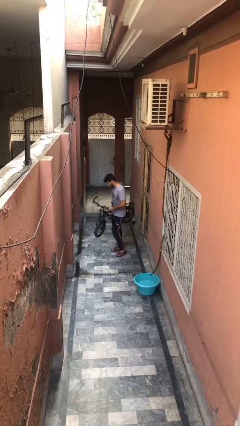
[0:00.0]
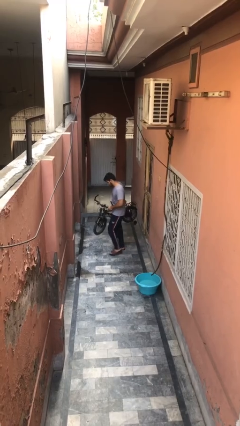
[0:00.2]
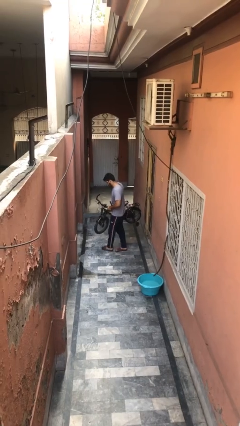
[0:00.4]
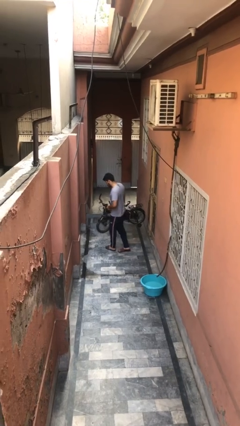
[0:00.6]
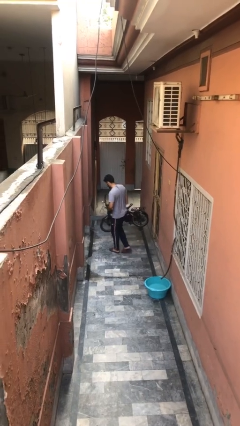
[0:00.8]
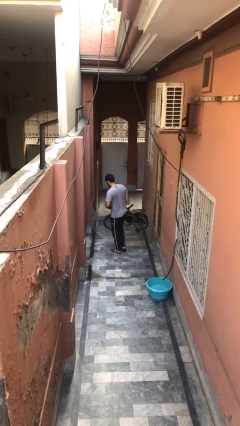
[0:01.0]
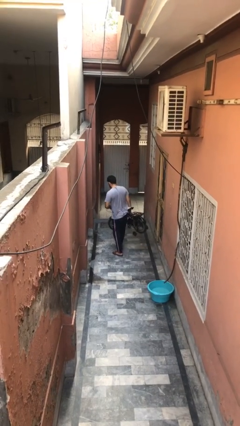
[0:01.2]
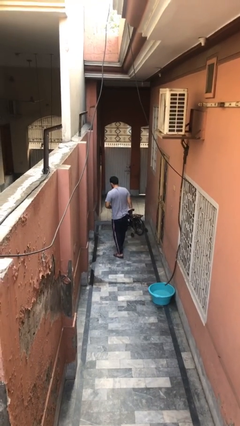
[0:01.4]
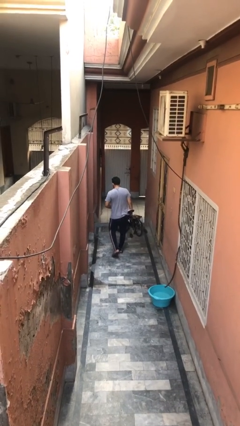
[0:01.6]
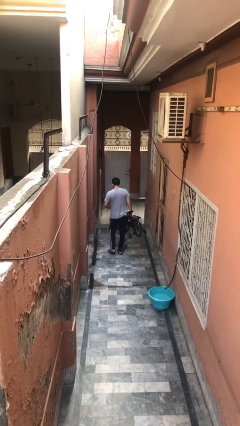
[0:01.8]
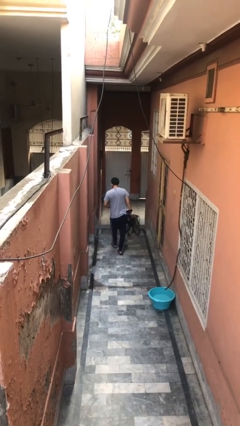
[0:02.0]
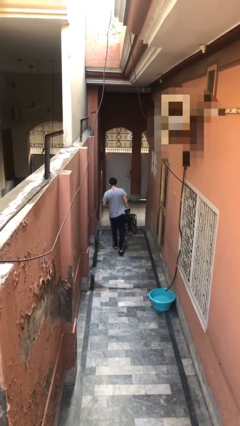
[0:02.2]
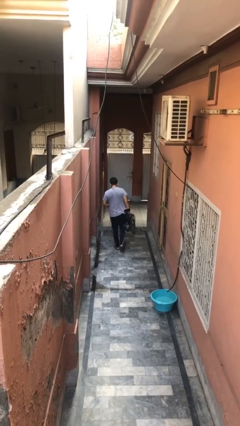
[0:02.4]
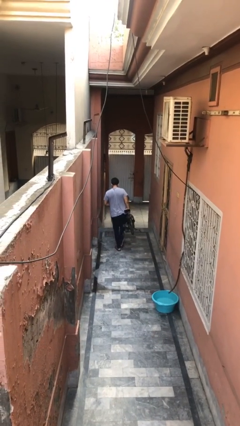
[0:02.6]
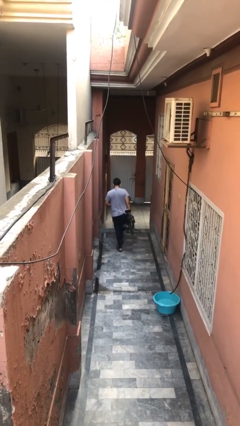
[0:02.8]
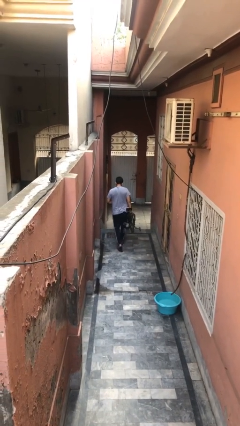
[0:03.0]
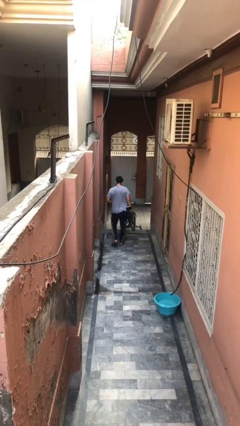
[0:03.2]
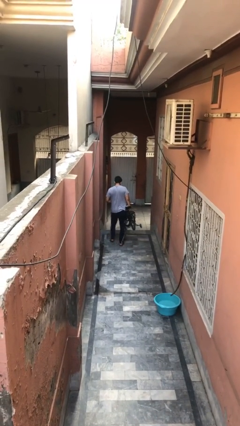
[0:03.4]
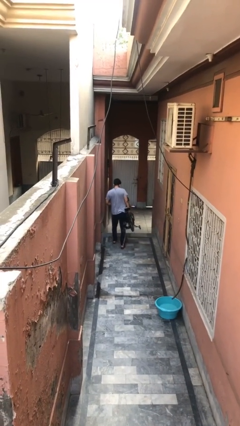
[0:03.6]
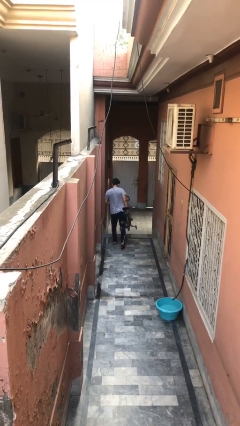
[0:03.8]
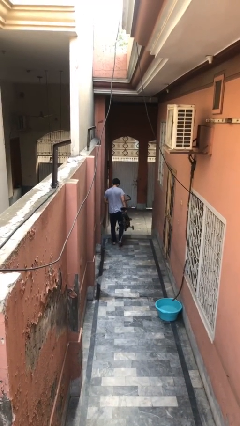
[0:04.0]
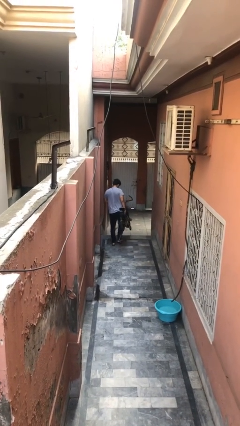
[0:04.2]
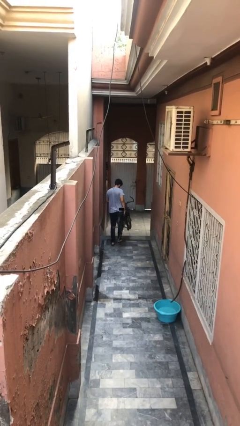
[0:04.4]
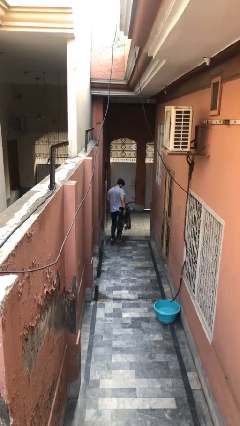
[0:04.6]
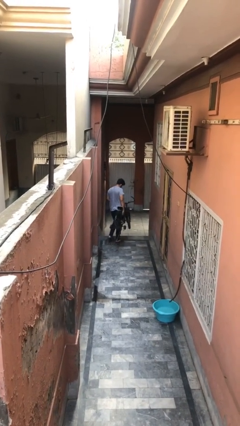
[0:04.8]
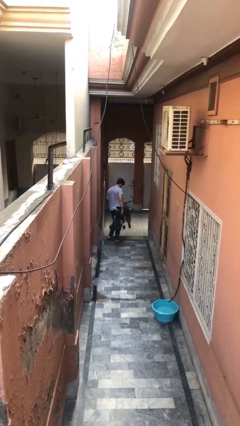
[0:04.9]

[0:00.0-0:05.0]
person carries bicycle

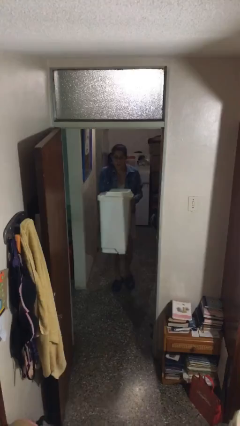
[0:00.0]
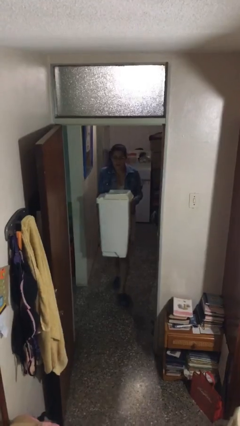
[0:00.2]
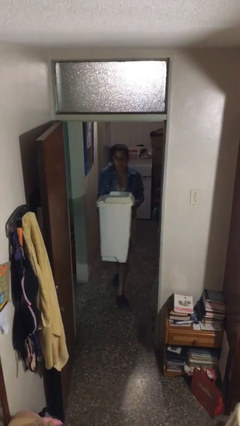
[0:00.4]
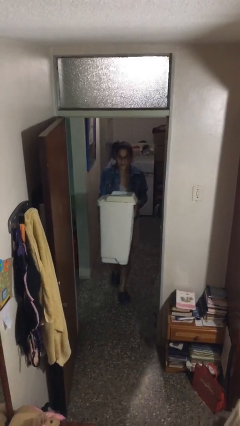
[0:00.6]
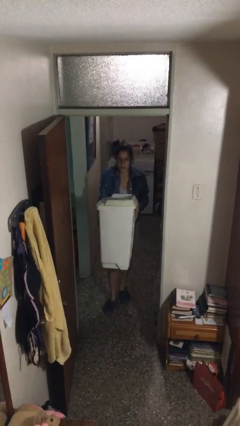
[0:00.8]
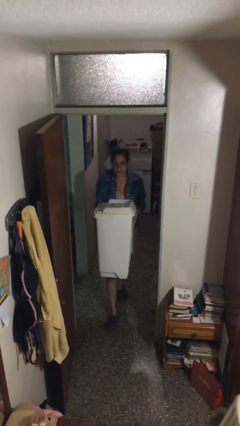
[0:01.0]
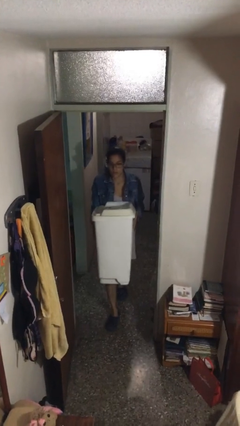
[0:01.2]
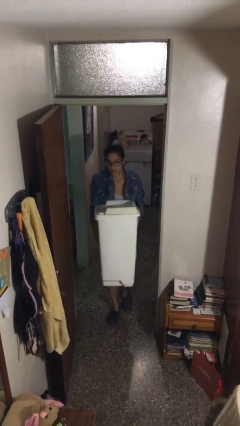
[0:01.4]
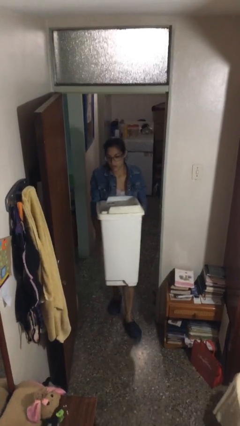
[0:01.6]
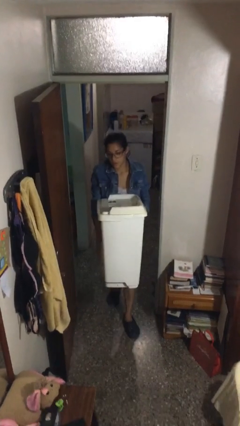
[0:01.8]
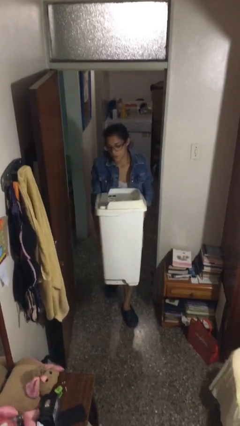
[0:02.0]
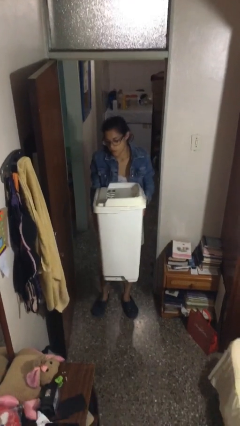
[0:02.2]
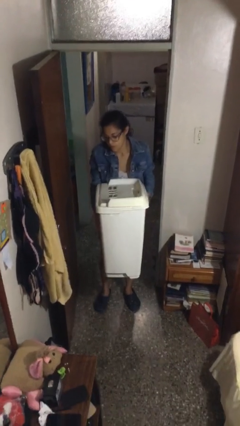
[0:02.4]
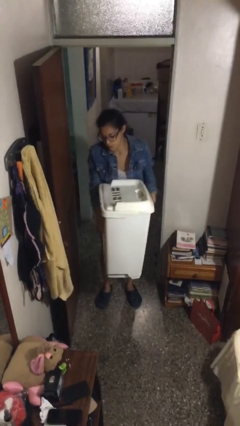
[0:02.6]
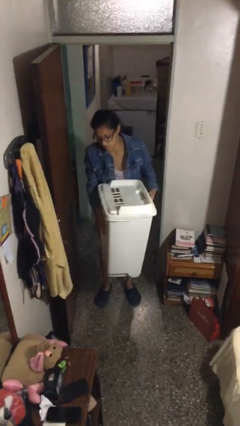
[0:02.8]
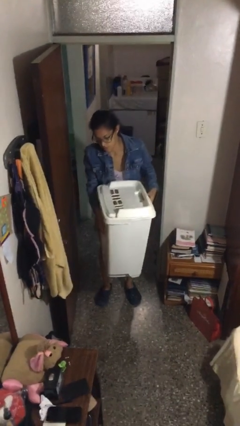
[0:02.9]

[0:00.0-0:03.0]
person carries heavy object

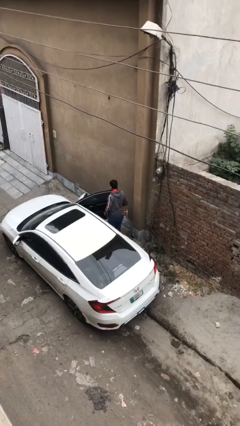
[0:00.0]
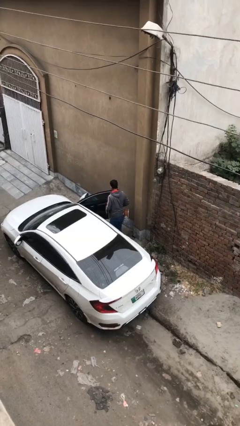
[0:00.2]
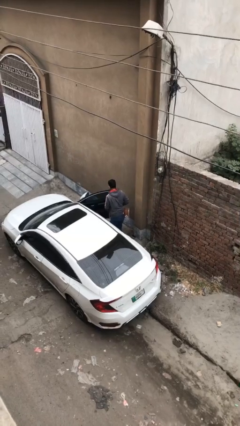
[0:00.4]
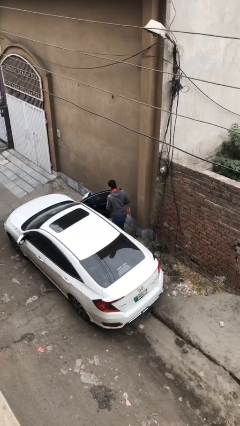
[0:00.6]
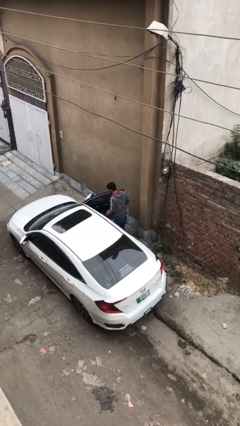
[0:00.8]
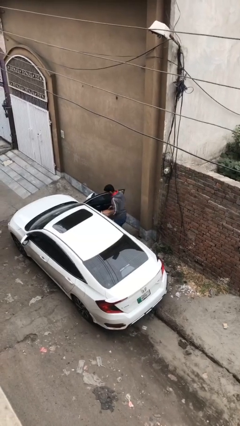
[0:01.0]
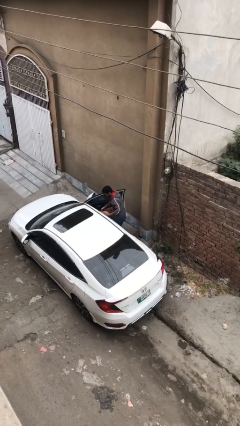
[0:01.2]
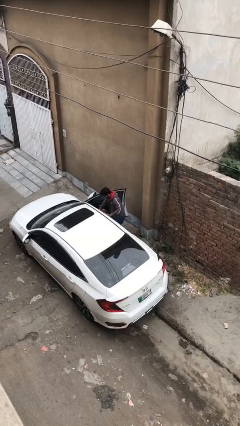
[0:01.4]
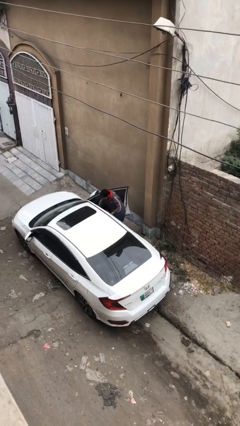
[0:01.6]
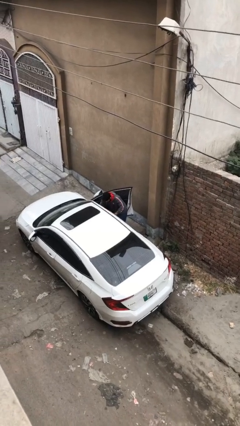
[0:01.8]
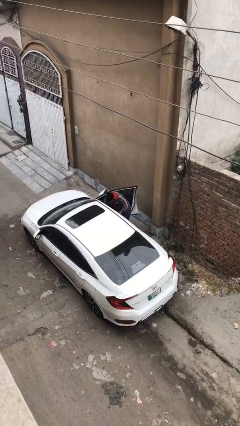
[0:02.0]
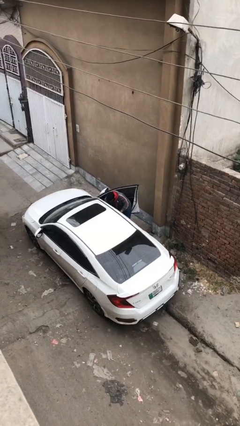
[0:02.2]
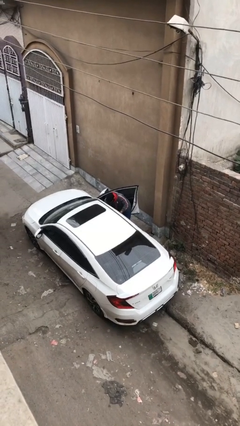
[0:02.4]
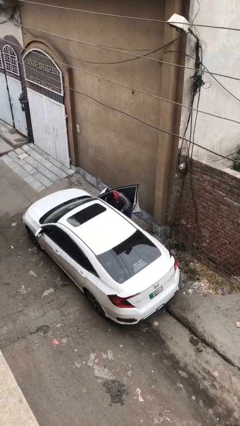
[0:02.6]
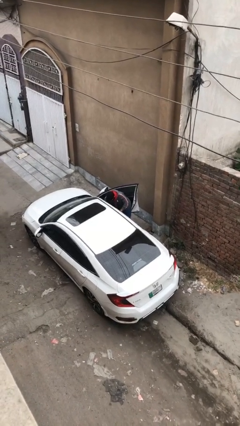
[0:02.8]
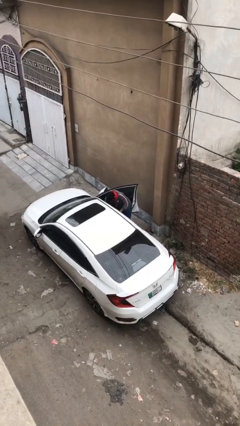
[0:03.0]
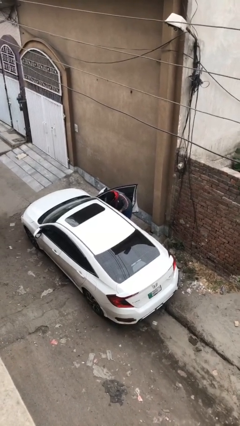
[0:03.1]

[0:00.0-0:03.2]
person loads car

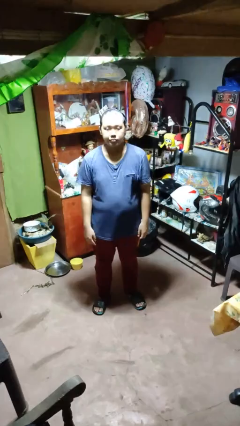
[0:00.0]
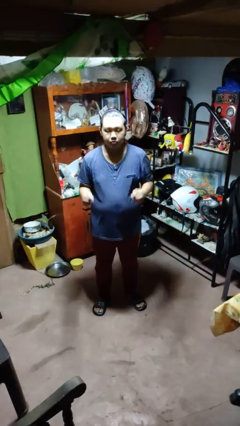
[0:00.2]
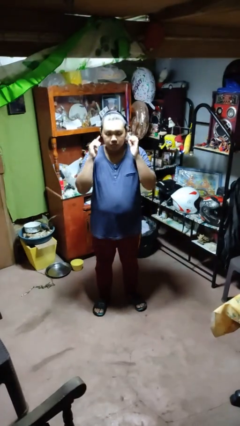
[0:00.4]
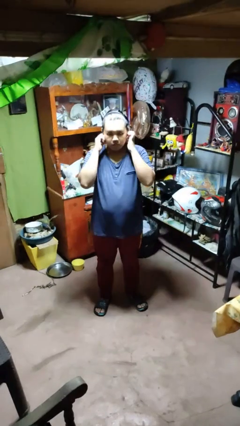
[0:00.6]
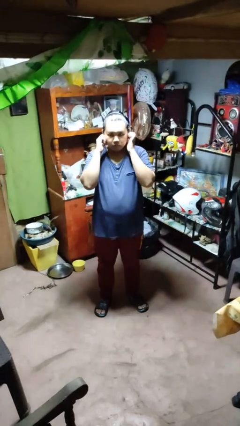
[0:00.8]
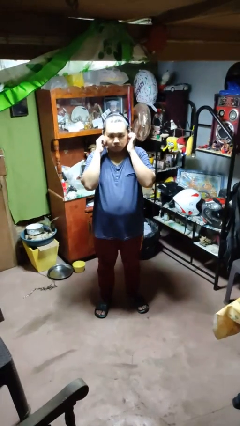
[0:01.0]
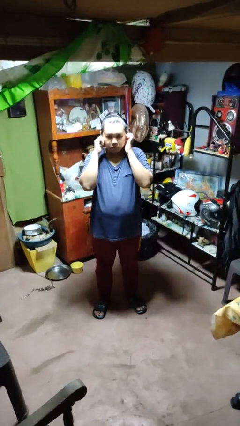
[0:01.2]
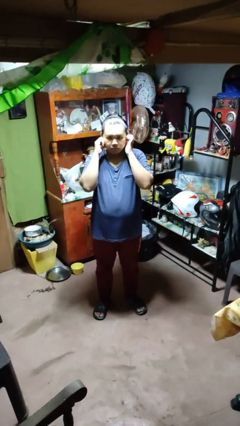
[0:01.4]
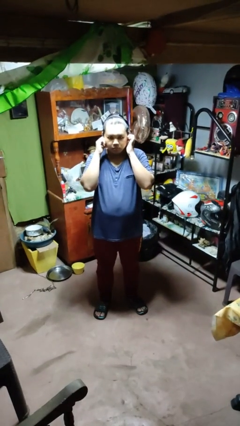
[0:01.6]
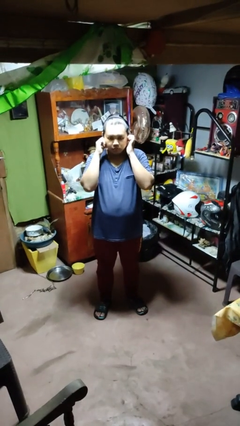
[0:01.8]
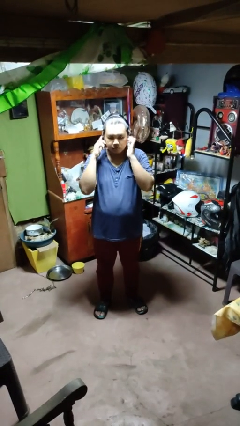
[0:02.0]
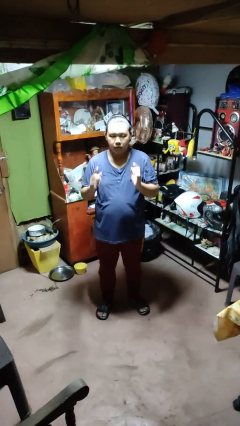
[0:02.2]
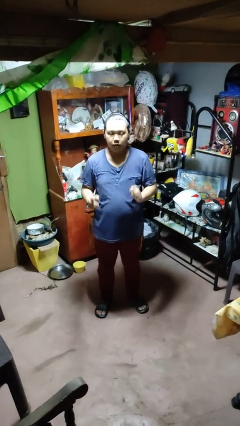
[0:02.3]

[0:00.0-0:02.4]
person puts fingers in ear

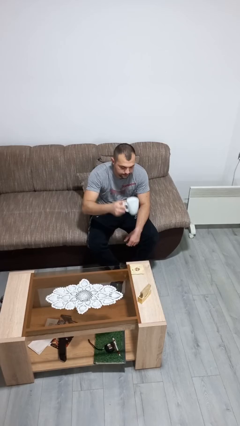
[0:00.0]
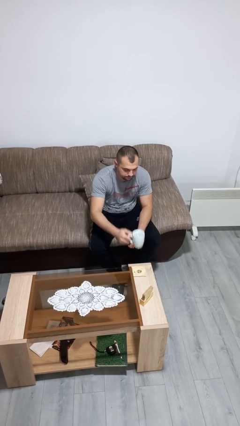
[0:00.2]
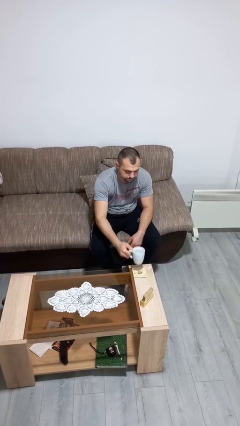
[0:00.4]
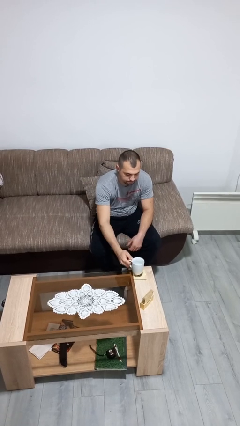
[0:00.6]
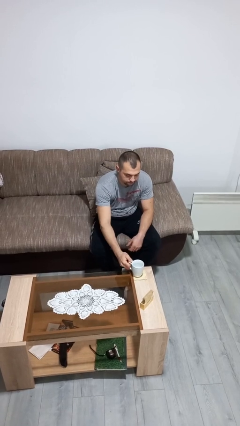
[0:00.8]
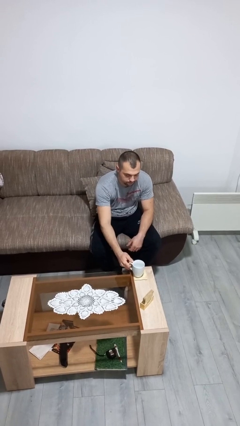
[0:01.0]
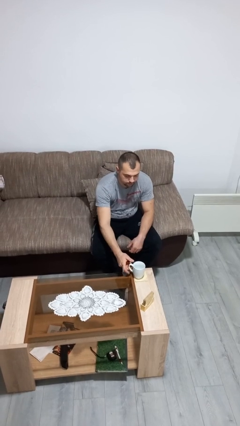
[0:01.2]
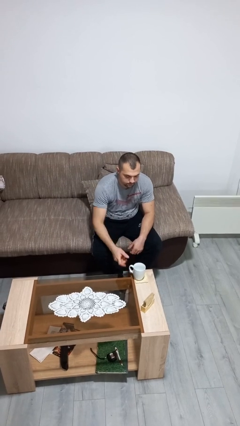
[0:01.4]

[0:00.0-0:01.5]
person puts down object on table

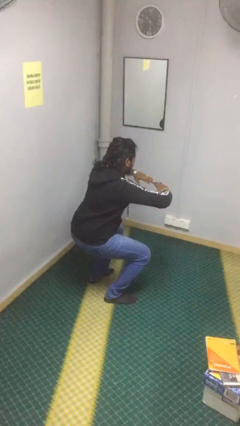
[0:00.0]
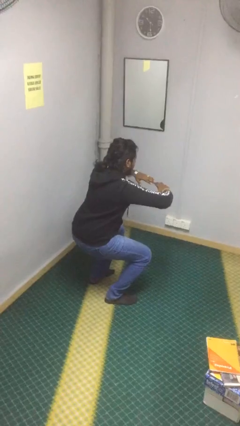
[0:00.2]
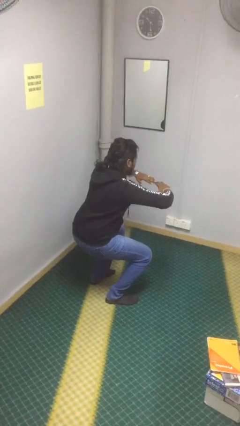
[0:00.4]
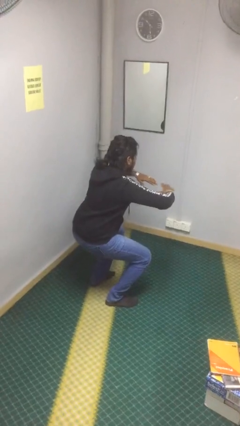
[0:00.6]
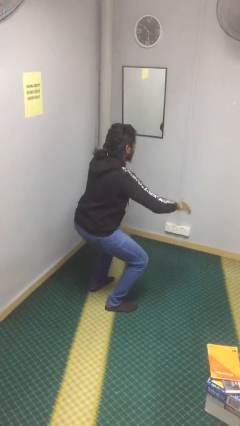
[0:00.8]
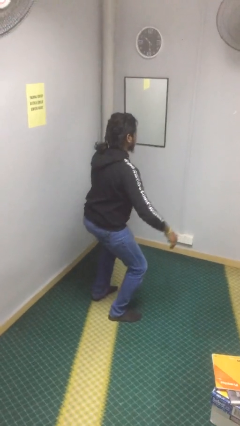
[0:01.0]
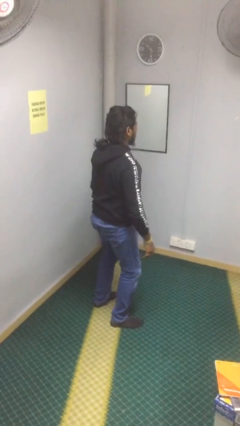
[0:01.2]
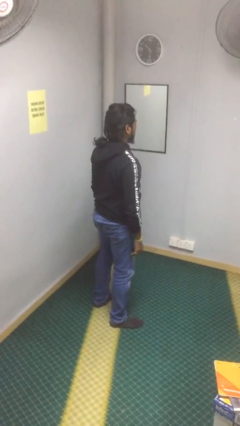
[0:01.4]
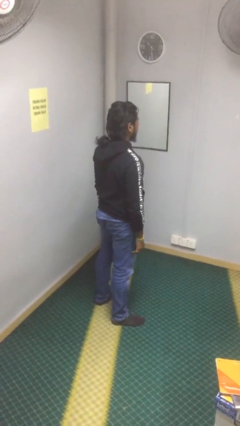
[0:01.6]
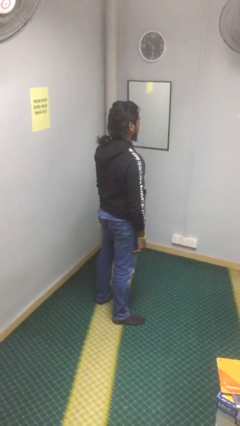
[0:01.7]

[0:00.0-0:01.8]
person stands up

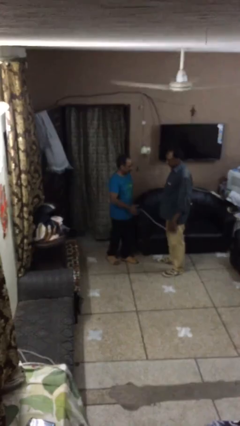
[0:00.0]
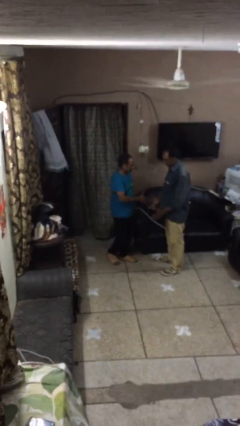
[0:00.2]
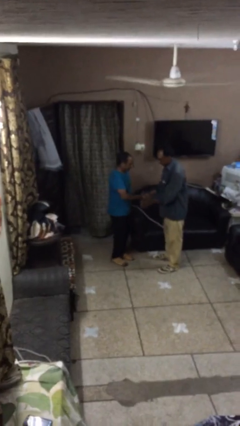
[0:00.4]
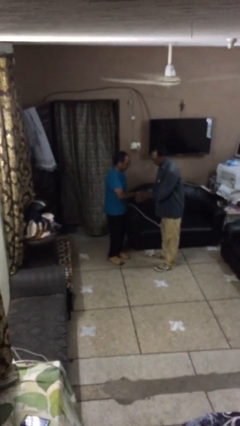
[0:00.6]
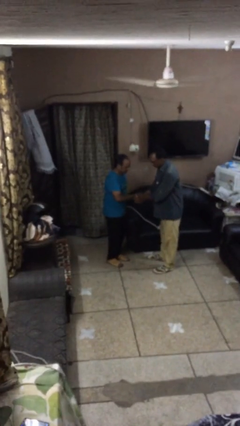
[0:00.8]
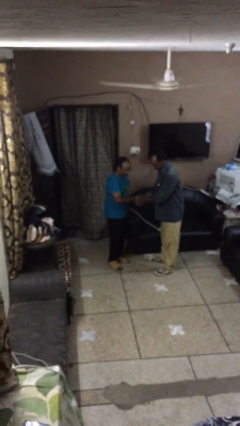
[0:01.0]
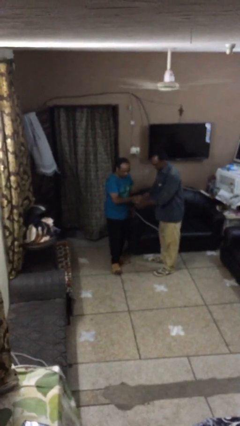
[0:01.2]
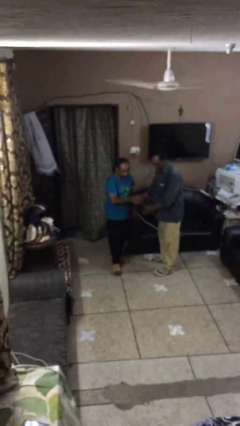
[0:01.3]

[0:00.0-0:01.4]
person shakes hand
